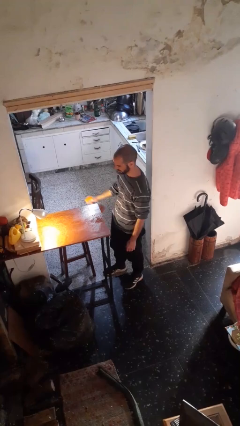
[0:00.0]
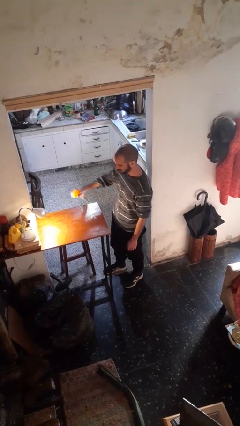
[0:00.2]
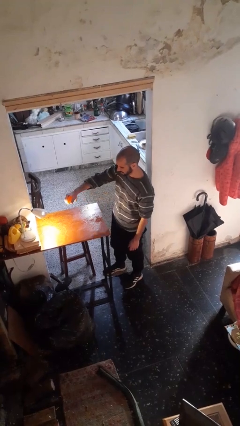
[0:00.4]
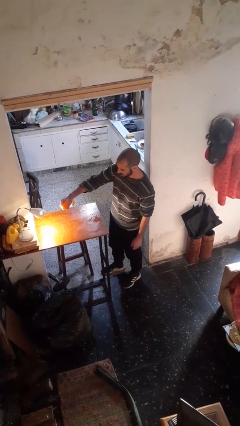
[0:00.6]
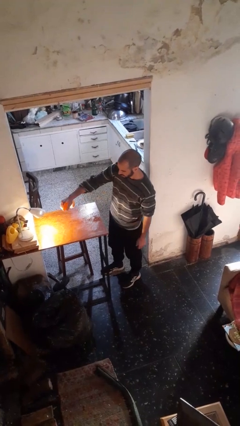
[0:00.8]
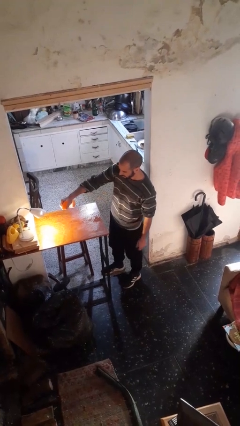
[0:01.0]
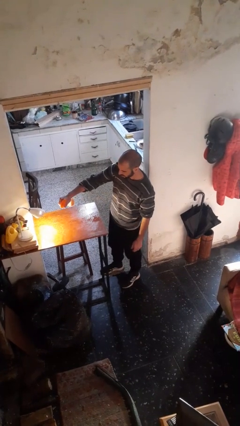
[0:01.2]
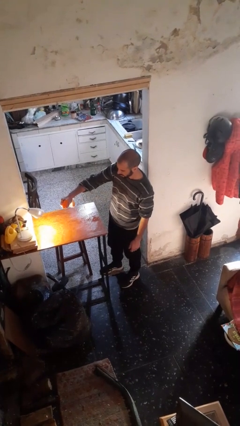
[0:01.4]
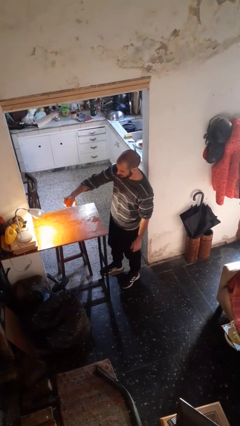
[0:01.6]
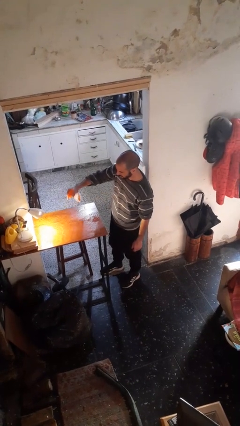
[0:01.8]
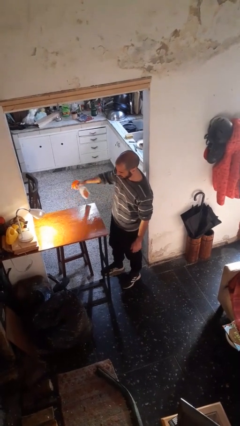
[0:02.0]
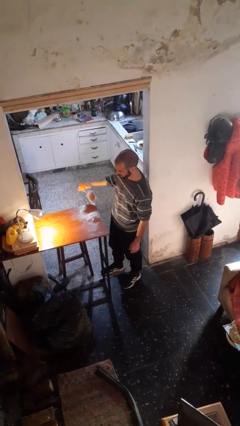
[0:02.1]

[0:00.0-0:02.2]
person sprays from bottle

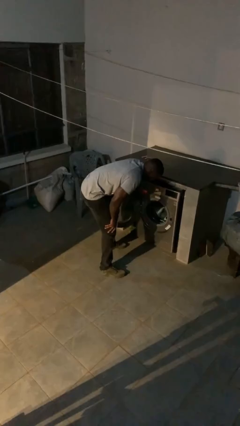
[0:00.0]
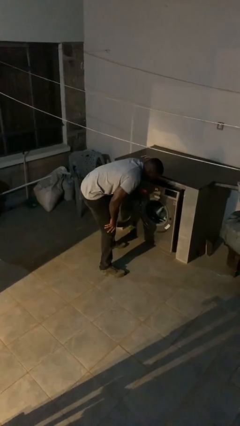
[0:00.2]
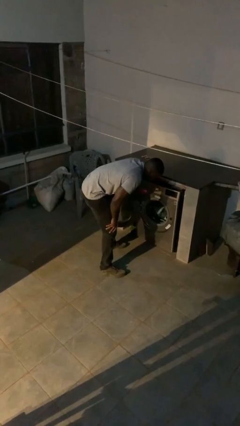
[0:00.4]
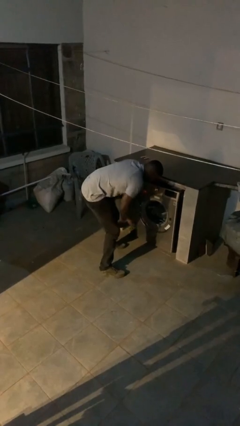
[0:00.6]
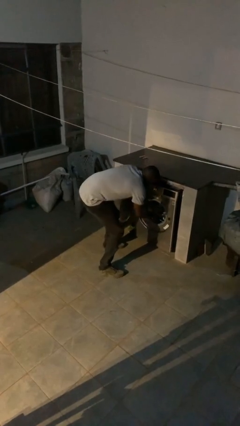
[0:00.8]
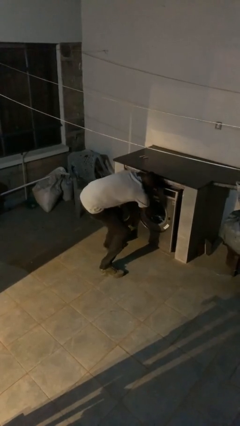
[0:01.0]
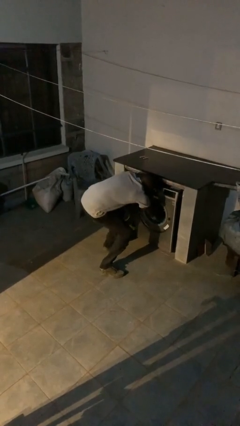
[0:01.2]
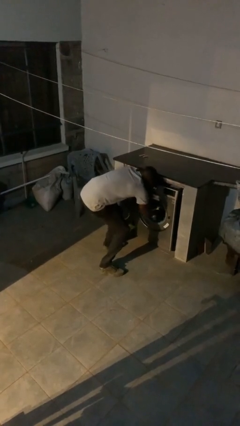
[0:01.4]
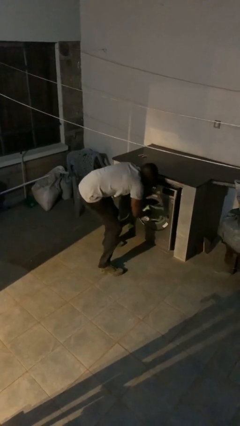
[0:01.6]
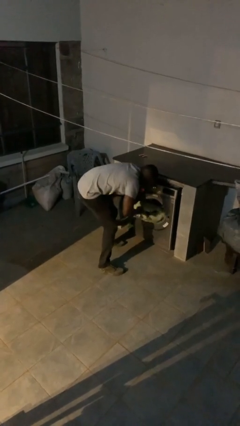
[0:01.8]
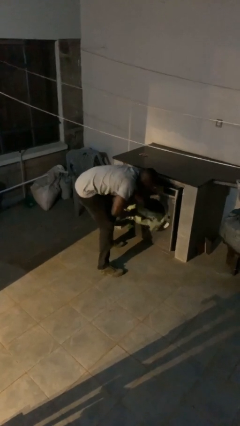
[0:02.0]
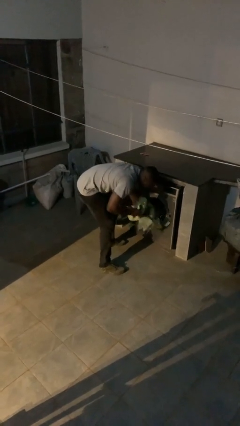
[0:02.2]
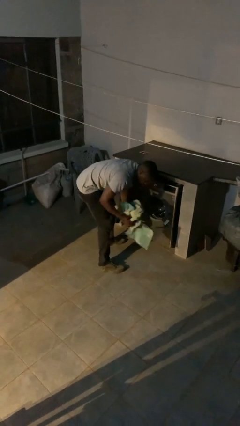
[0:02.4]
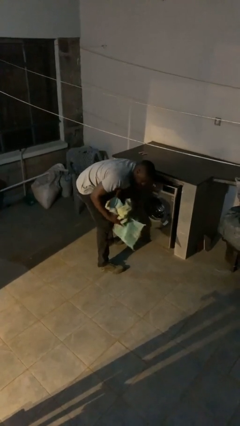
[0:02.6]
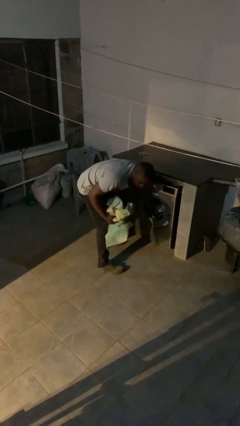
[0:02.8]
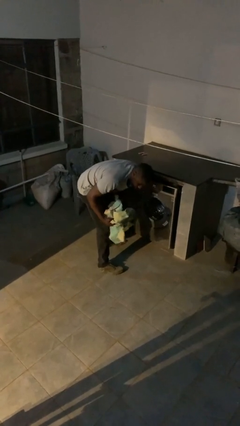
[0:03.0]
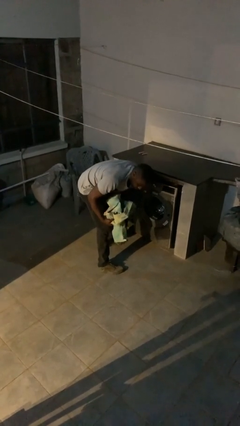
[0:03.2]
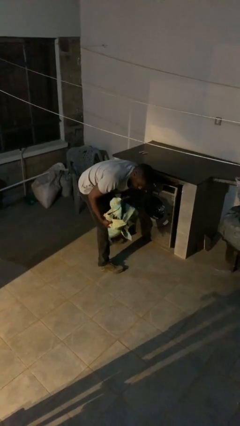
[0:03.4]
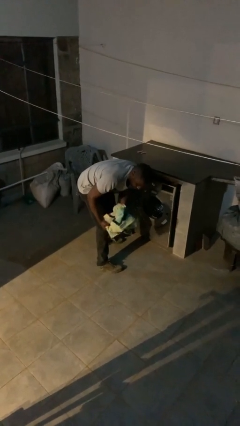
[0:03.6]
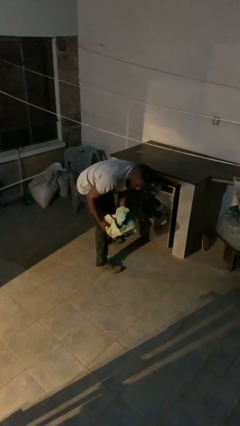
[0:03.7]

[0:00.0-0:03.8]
person unloads clotheswasher

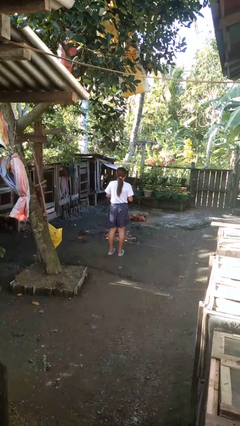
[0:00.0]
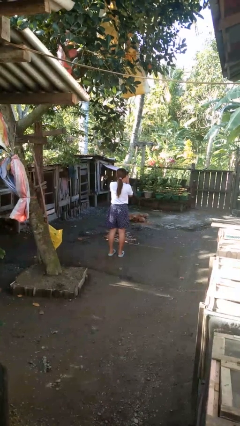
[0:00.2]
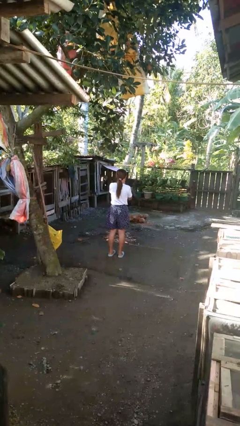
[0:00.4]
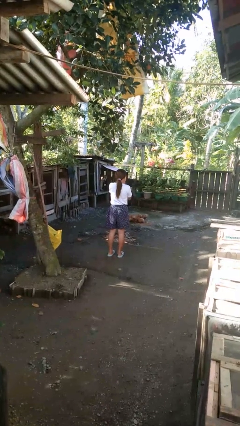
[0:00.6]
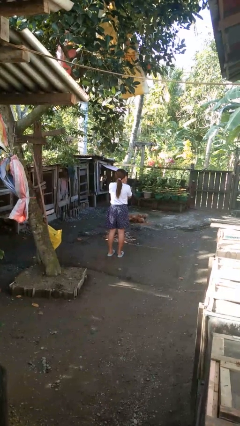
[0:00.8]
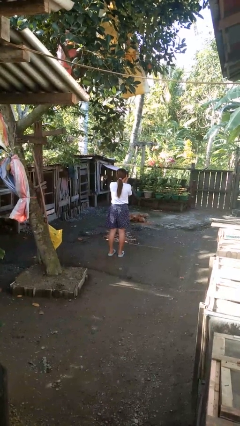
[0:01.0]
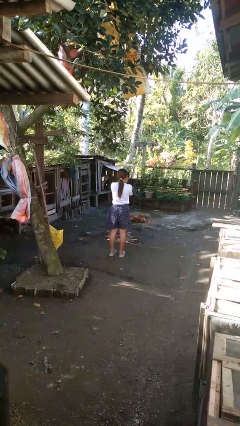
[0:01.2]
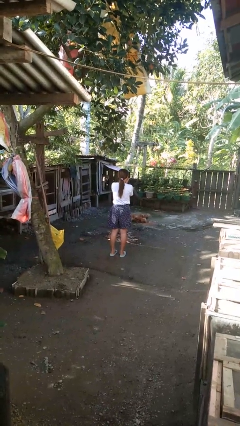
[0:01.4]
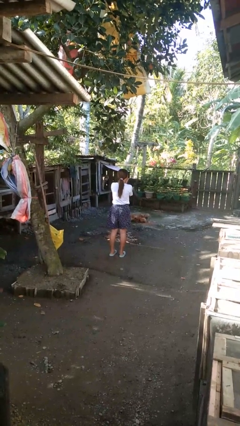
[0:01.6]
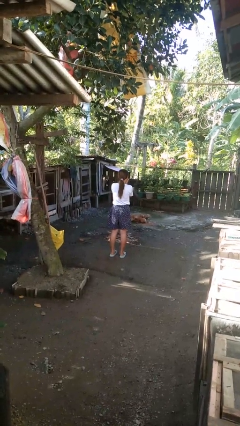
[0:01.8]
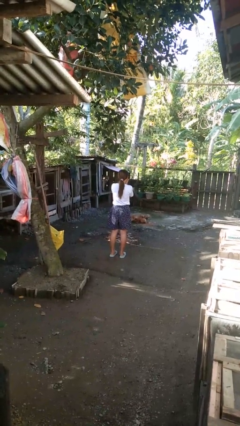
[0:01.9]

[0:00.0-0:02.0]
person blows into hands

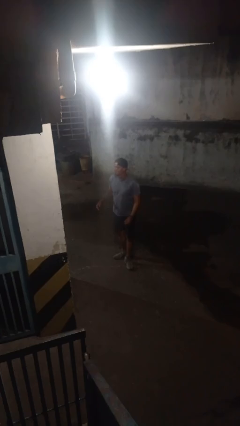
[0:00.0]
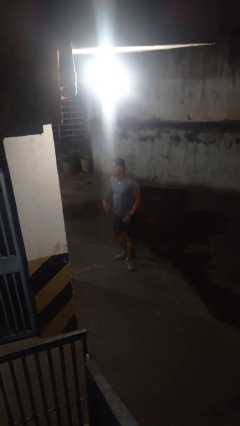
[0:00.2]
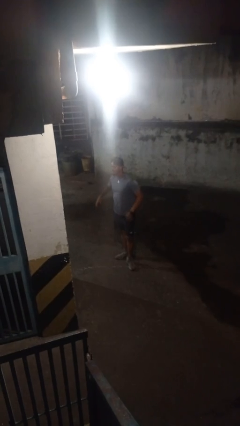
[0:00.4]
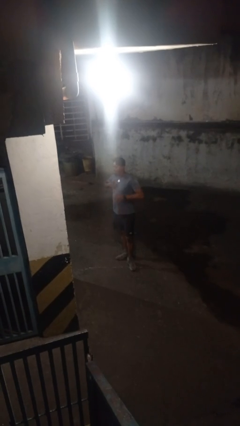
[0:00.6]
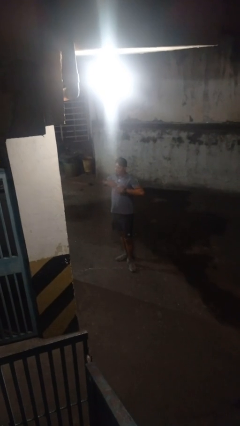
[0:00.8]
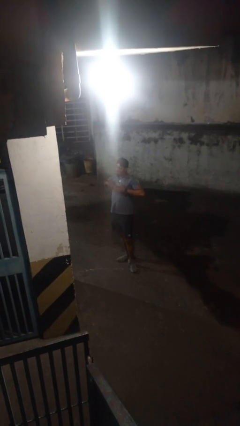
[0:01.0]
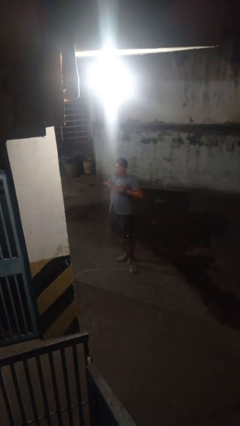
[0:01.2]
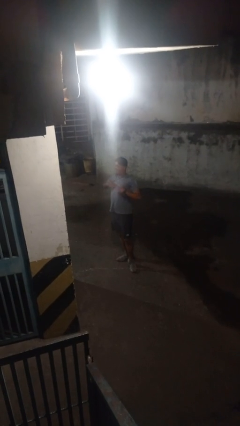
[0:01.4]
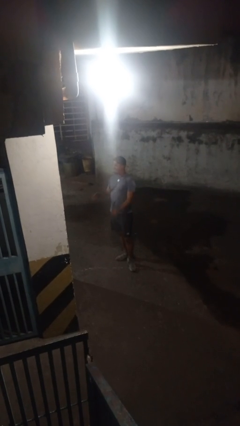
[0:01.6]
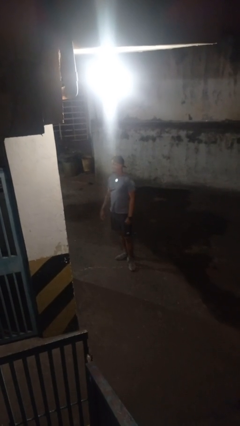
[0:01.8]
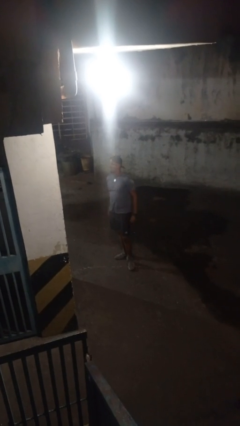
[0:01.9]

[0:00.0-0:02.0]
person drums on chest

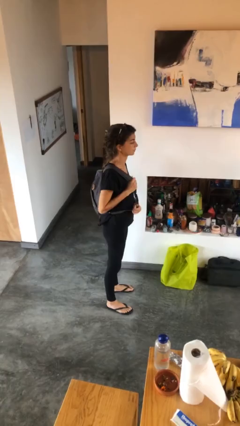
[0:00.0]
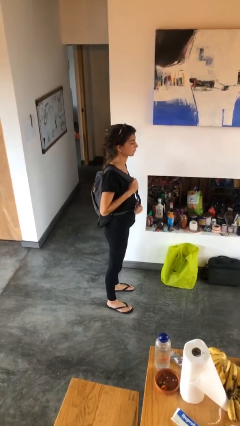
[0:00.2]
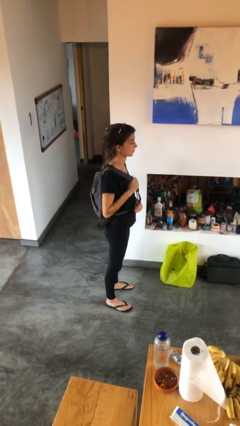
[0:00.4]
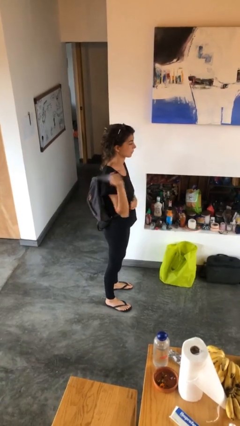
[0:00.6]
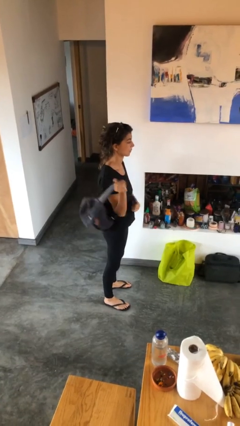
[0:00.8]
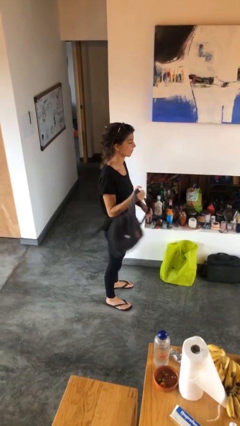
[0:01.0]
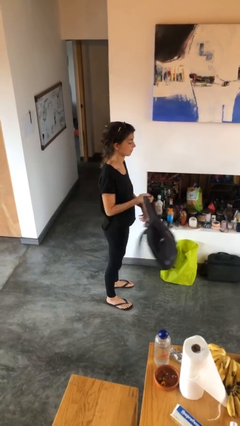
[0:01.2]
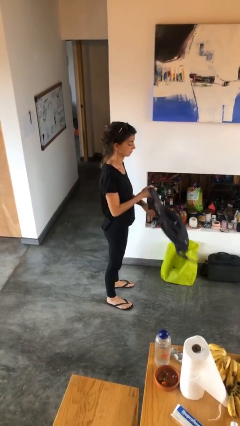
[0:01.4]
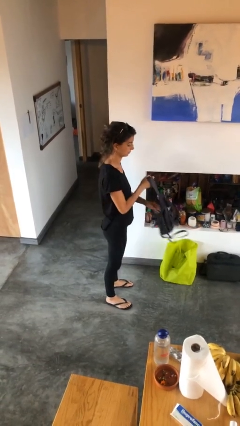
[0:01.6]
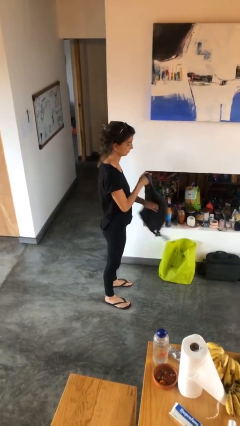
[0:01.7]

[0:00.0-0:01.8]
person takes off backpack

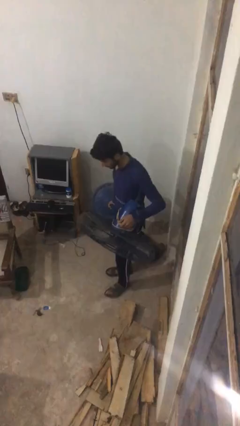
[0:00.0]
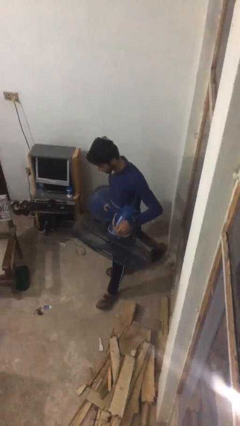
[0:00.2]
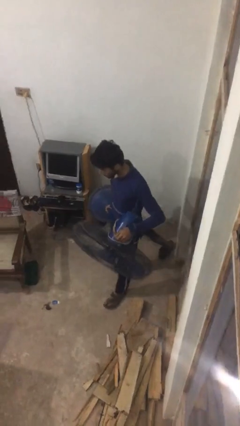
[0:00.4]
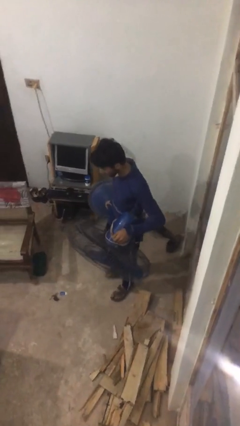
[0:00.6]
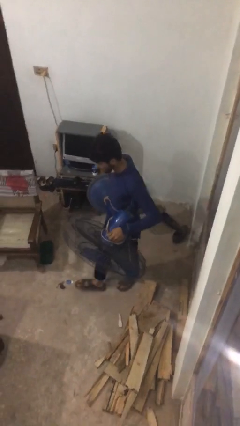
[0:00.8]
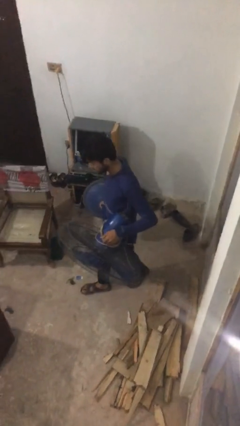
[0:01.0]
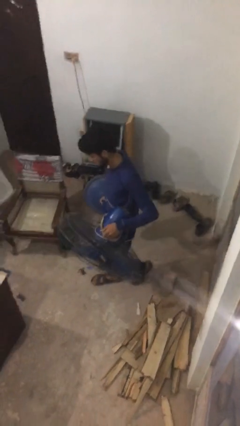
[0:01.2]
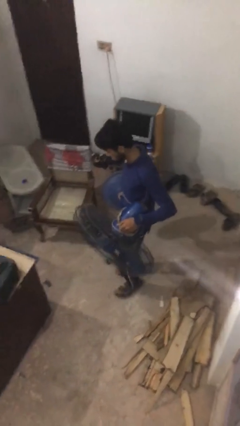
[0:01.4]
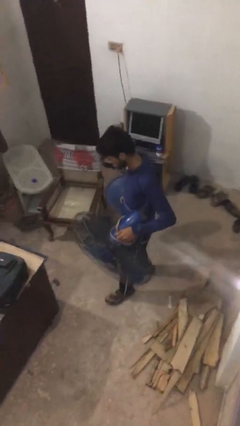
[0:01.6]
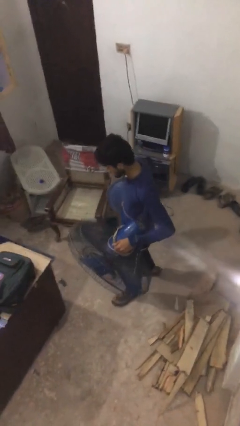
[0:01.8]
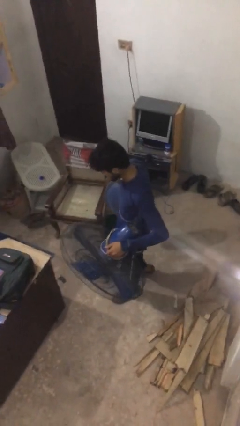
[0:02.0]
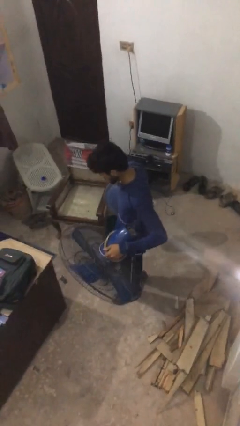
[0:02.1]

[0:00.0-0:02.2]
person carries heavy object

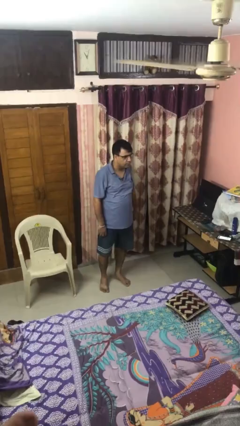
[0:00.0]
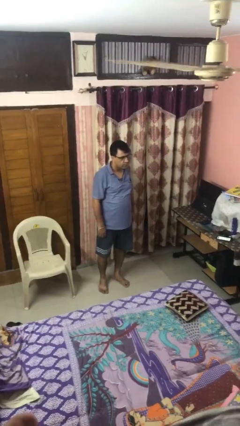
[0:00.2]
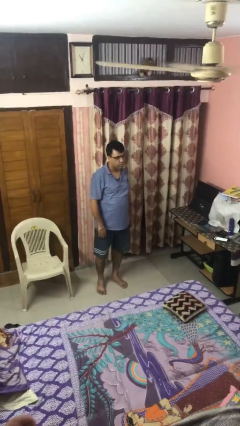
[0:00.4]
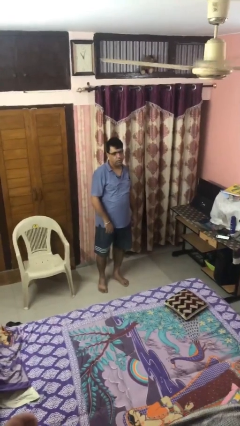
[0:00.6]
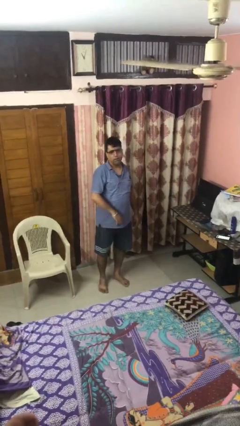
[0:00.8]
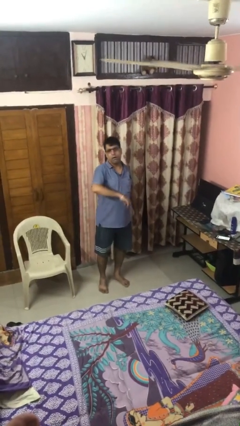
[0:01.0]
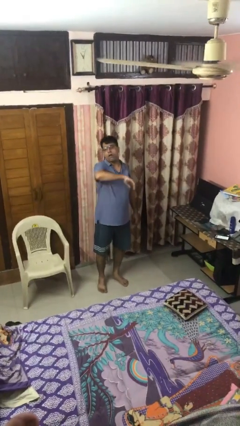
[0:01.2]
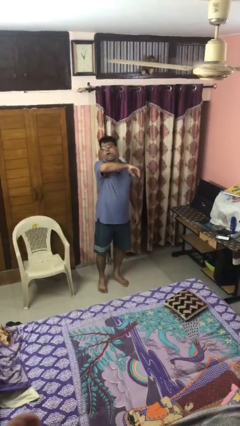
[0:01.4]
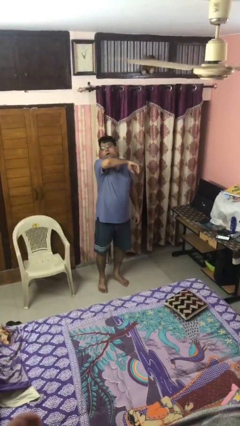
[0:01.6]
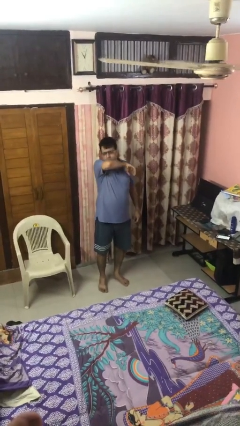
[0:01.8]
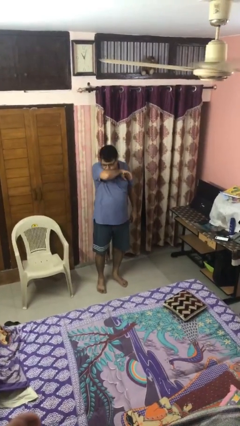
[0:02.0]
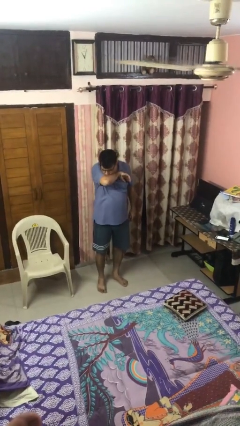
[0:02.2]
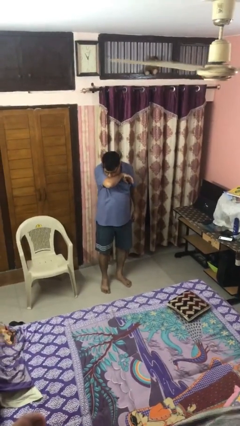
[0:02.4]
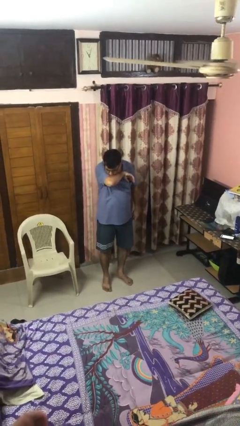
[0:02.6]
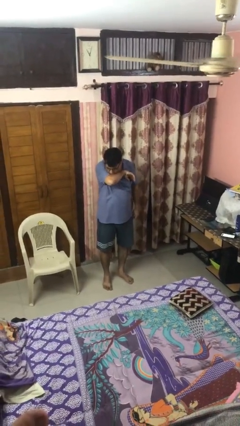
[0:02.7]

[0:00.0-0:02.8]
person sneezes into arm

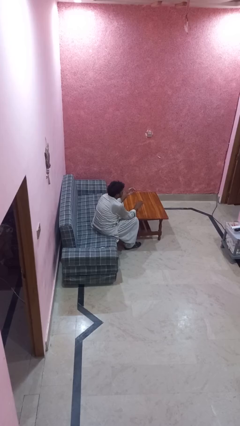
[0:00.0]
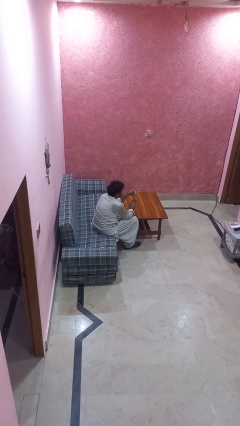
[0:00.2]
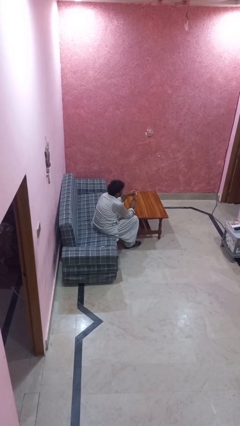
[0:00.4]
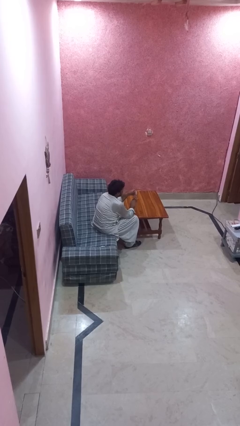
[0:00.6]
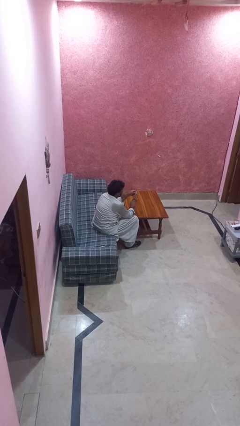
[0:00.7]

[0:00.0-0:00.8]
person clips fingernails
